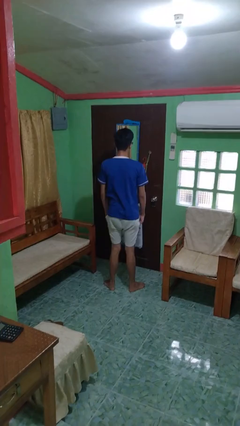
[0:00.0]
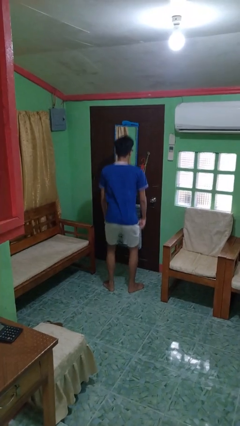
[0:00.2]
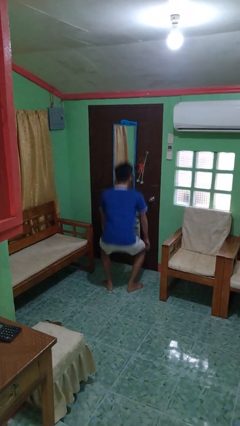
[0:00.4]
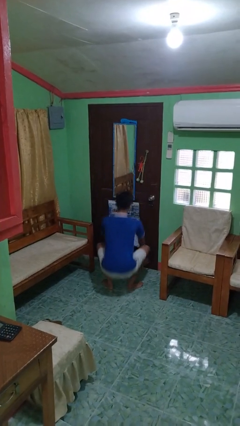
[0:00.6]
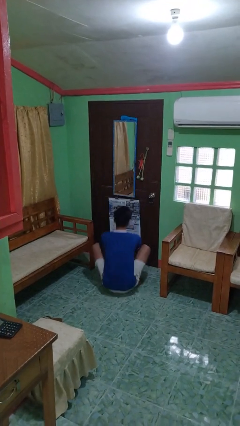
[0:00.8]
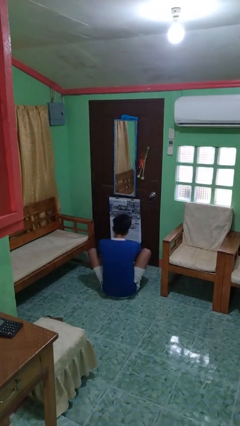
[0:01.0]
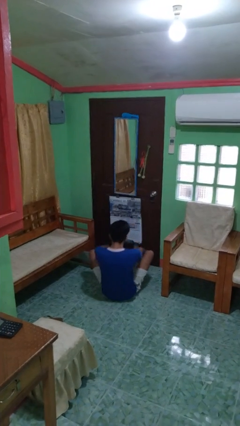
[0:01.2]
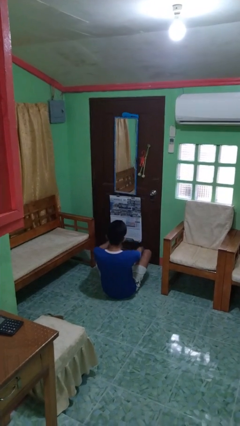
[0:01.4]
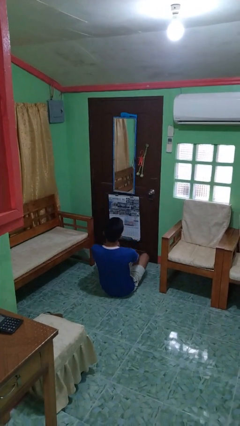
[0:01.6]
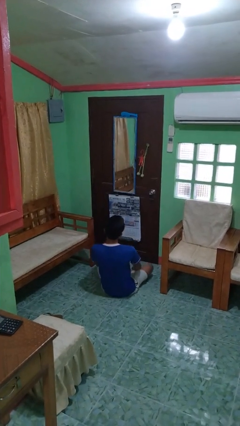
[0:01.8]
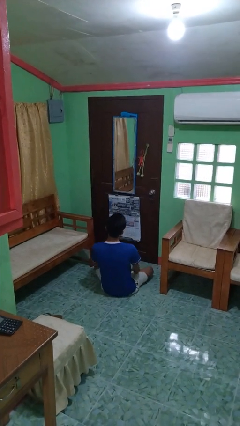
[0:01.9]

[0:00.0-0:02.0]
person sits crisscross

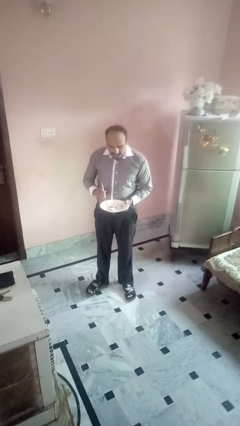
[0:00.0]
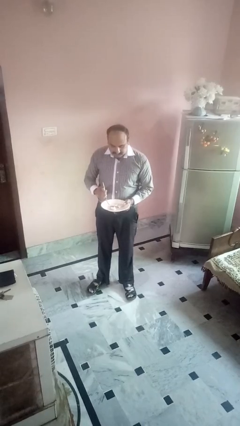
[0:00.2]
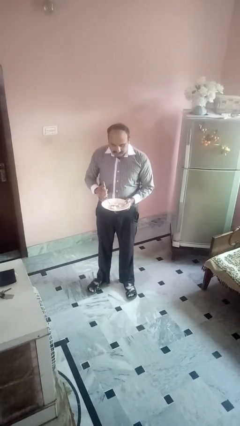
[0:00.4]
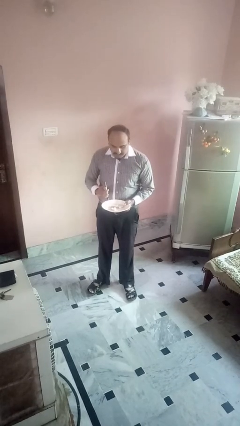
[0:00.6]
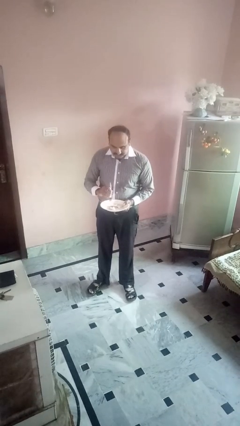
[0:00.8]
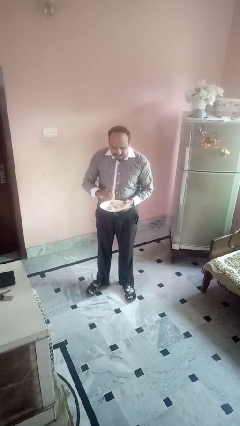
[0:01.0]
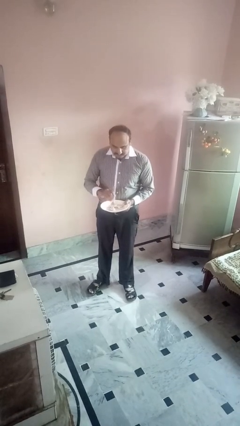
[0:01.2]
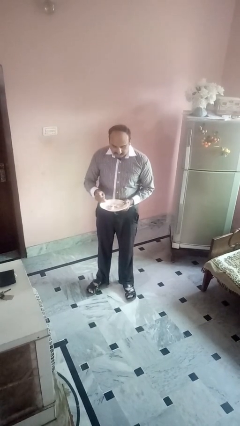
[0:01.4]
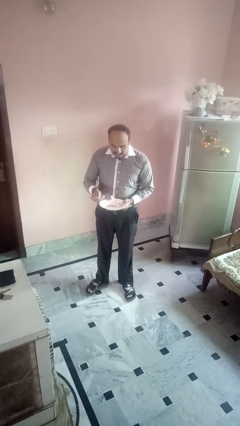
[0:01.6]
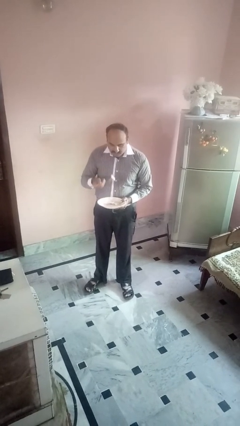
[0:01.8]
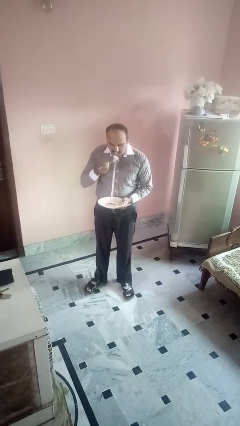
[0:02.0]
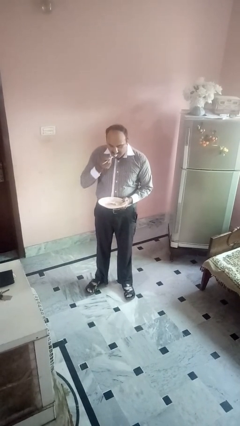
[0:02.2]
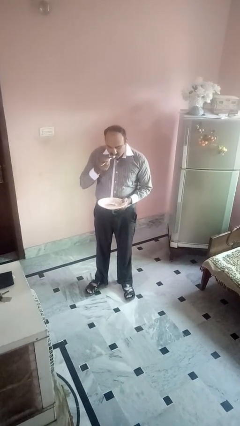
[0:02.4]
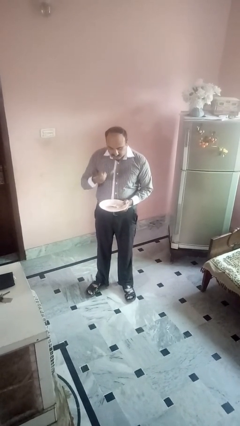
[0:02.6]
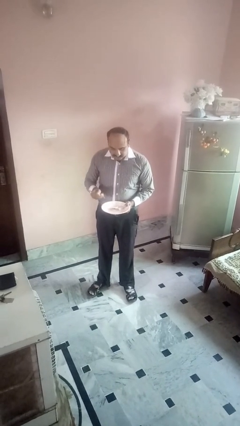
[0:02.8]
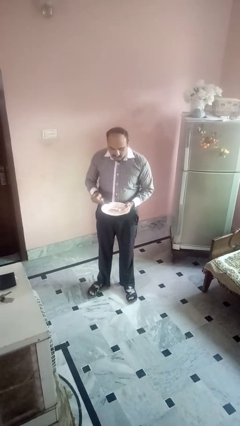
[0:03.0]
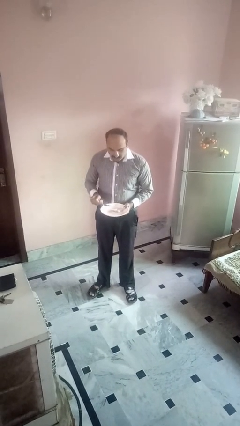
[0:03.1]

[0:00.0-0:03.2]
person eats with utensil

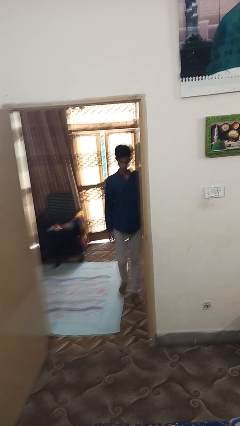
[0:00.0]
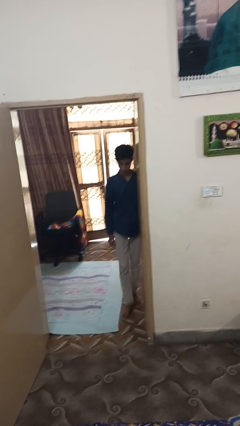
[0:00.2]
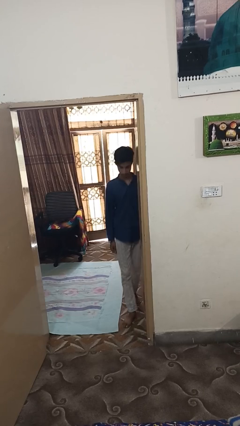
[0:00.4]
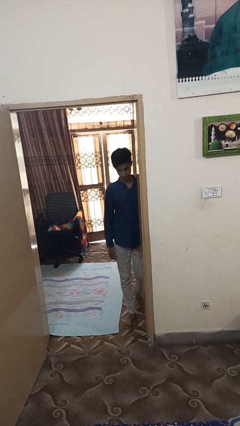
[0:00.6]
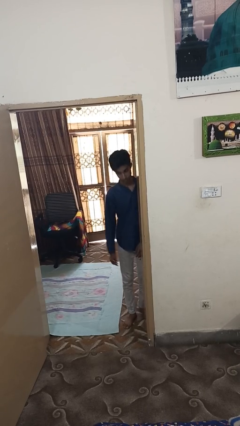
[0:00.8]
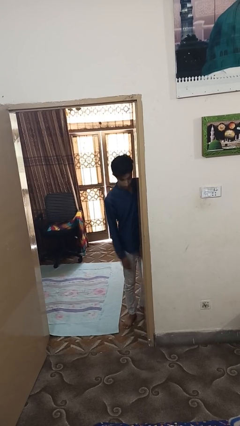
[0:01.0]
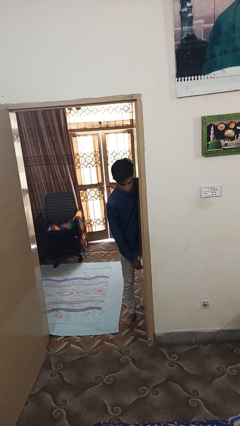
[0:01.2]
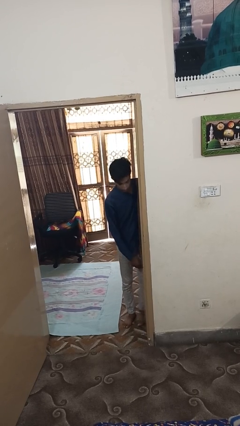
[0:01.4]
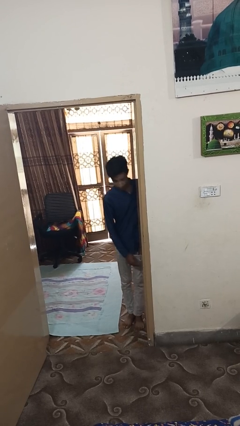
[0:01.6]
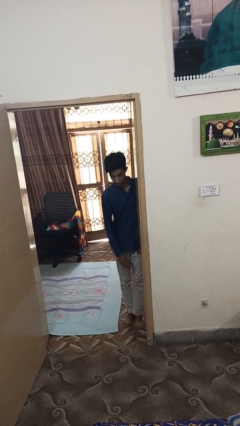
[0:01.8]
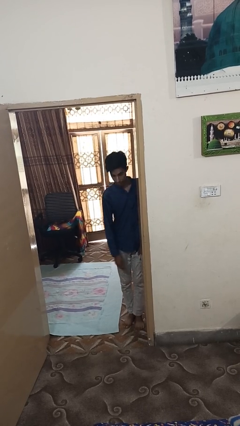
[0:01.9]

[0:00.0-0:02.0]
person bumps into wall

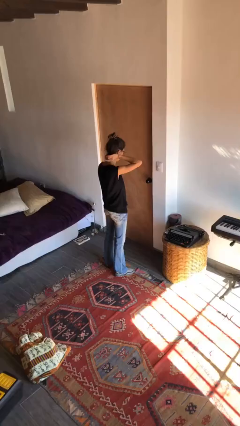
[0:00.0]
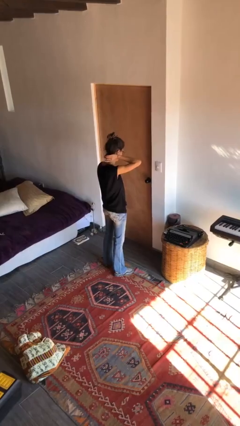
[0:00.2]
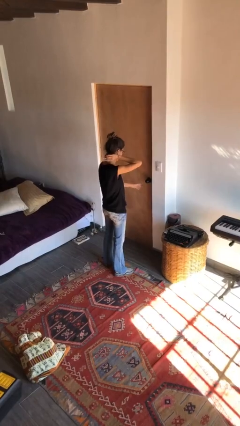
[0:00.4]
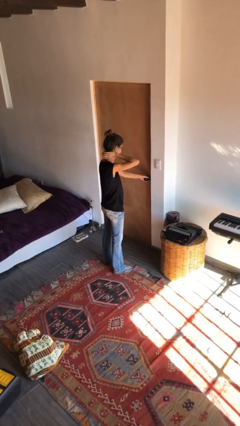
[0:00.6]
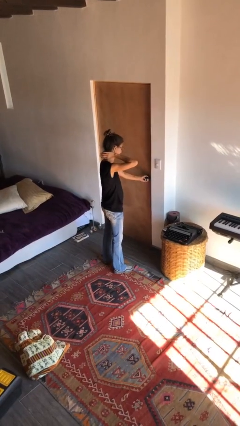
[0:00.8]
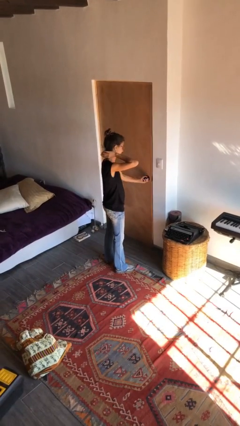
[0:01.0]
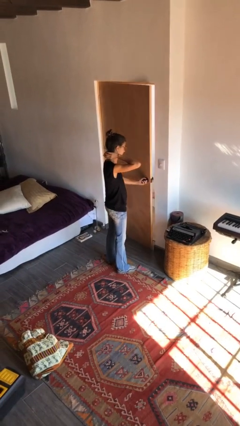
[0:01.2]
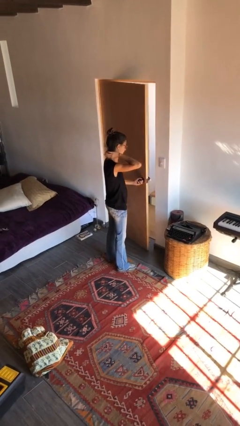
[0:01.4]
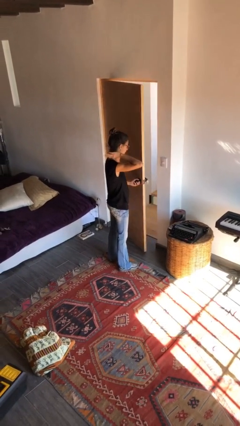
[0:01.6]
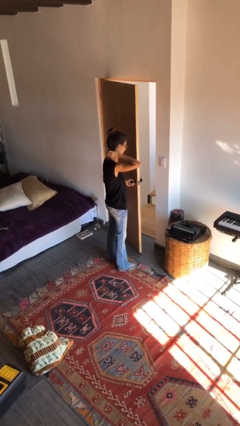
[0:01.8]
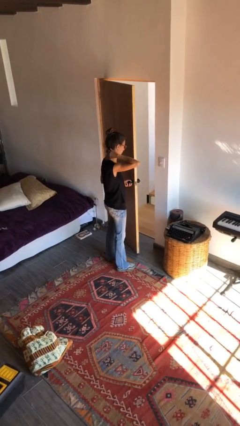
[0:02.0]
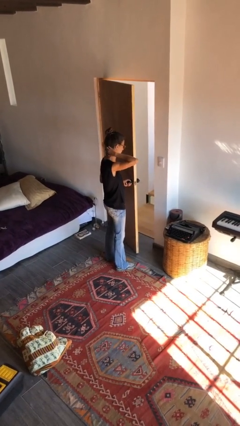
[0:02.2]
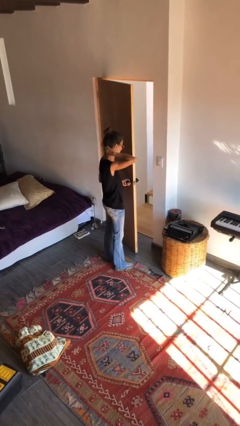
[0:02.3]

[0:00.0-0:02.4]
person opens facility door

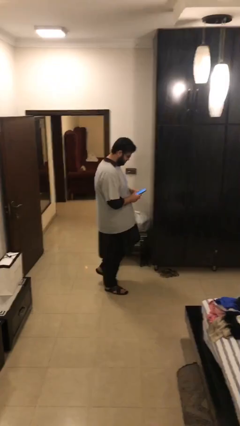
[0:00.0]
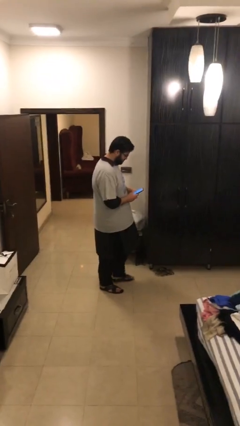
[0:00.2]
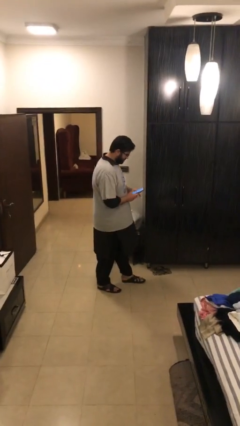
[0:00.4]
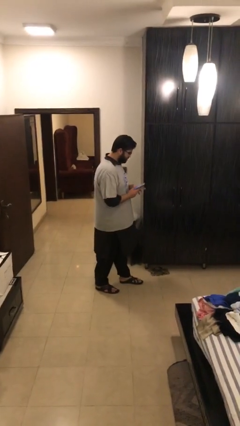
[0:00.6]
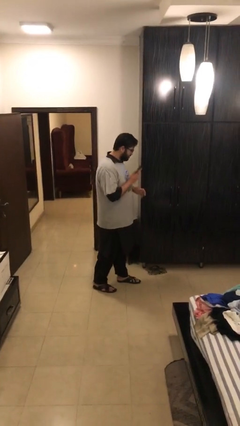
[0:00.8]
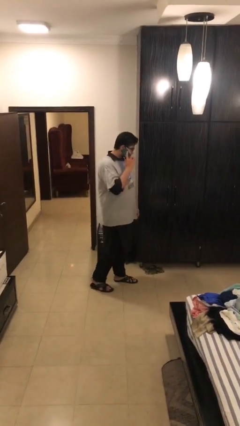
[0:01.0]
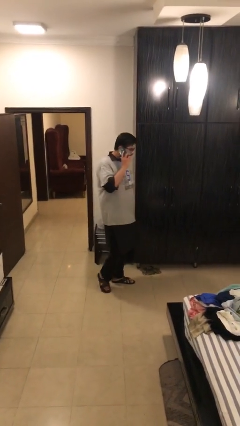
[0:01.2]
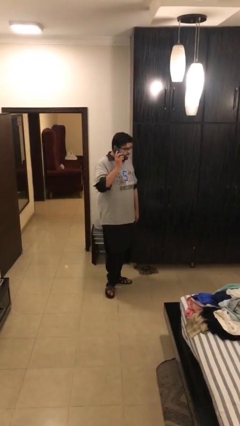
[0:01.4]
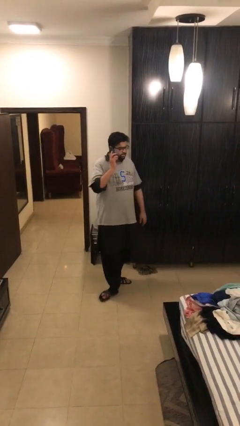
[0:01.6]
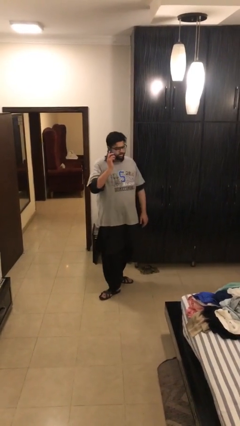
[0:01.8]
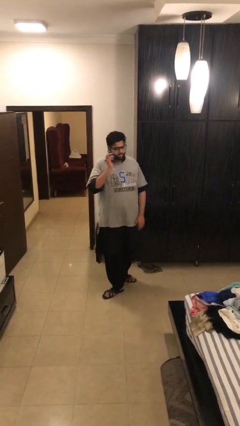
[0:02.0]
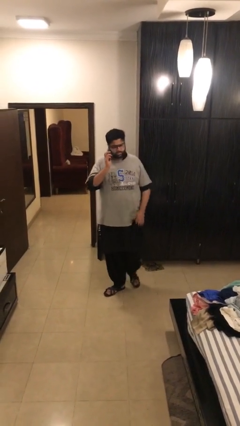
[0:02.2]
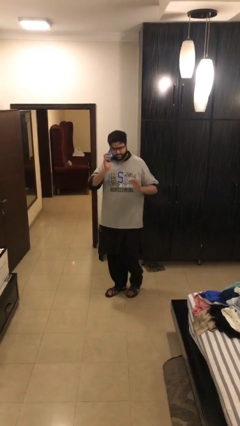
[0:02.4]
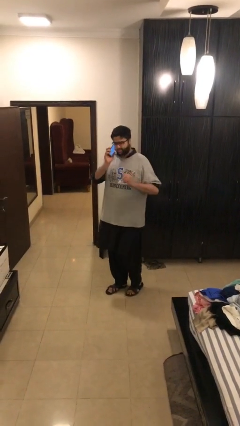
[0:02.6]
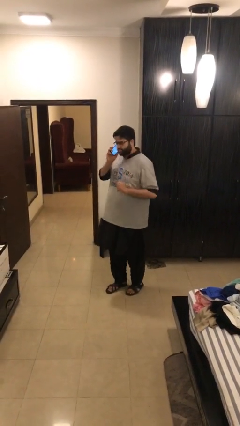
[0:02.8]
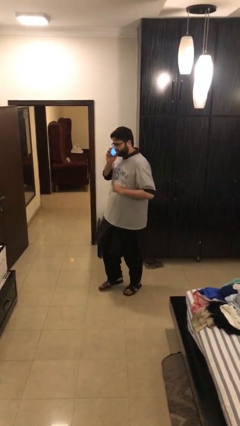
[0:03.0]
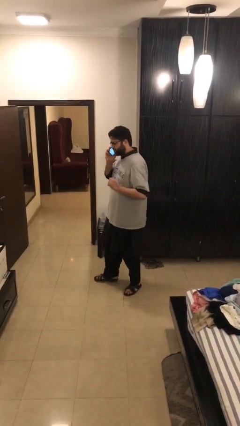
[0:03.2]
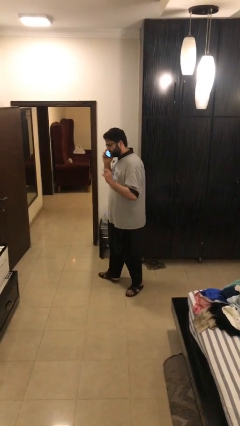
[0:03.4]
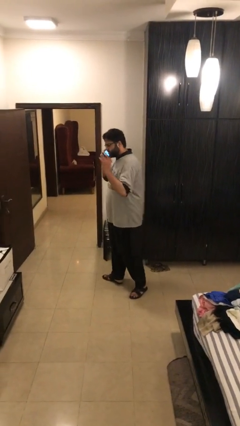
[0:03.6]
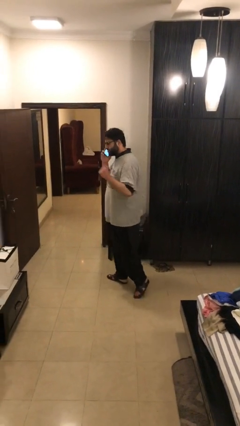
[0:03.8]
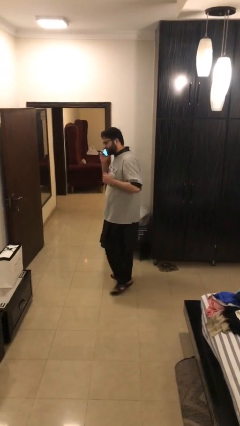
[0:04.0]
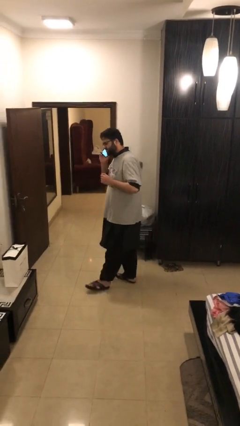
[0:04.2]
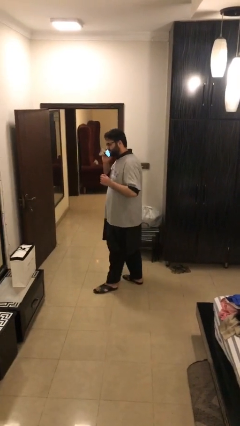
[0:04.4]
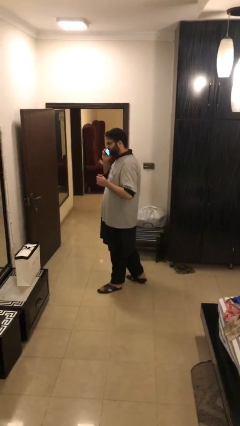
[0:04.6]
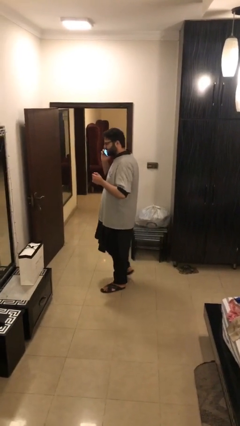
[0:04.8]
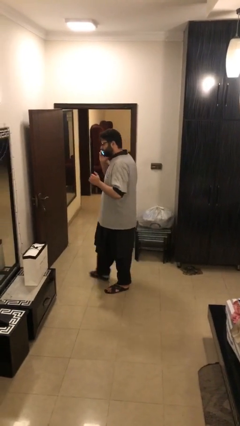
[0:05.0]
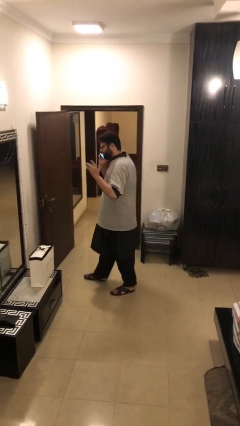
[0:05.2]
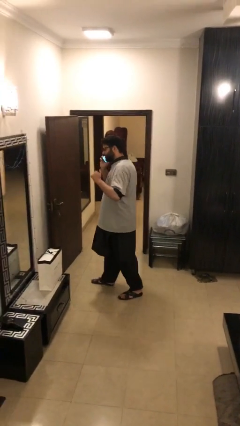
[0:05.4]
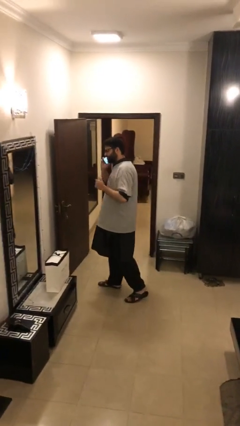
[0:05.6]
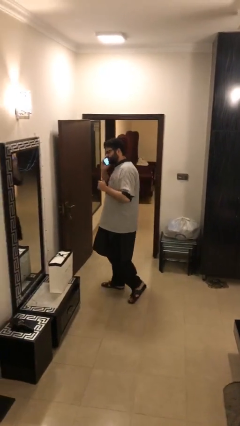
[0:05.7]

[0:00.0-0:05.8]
person talks on phone

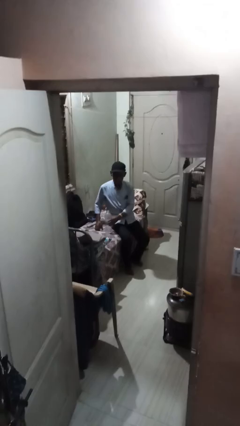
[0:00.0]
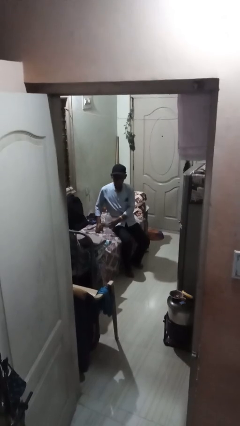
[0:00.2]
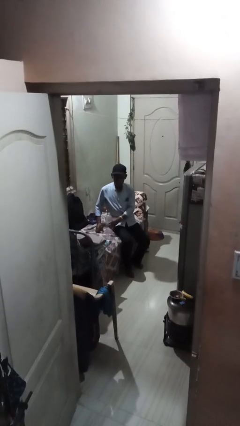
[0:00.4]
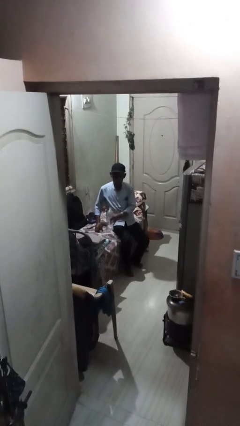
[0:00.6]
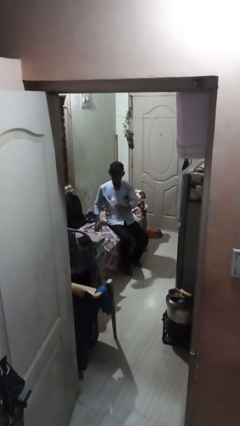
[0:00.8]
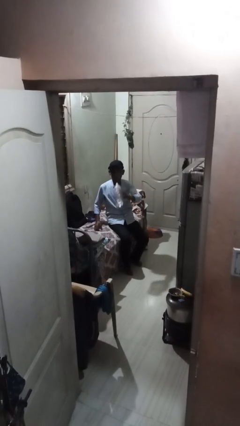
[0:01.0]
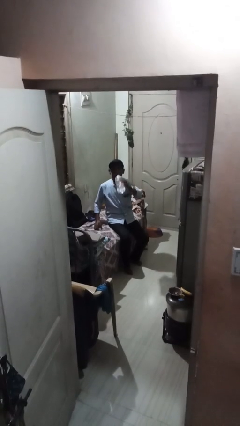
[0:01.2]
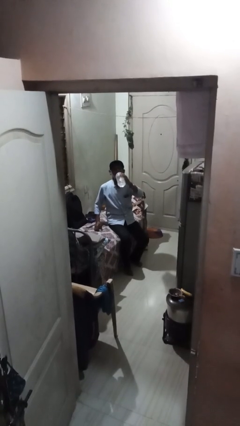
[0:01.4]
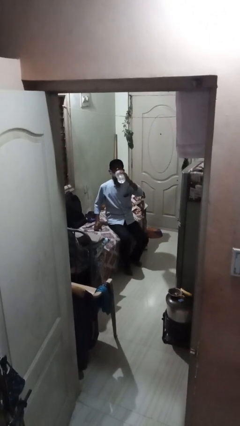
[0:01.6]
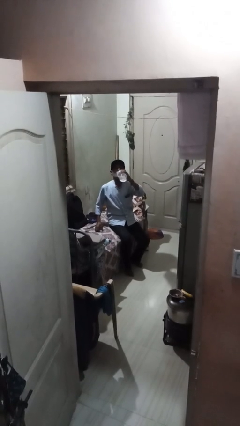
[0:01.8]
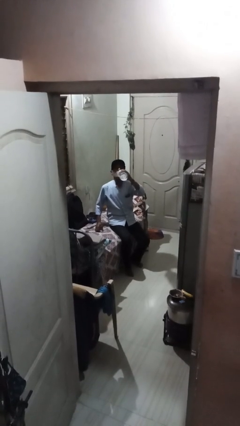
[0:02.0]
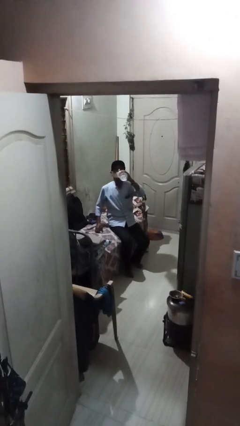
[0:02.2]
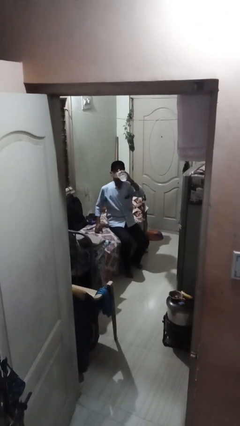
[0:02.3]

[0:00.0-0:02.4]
person drinks from bottle
